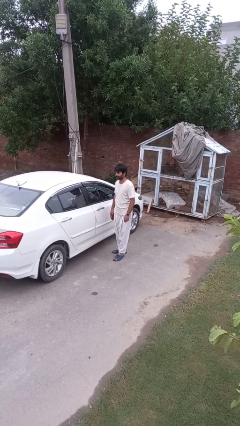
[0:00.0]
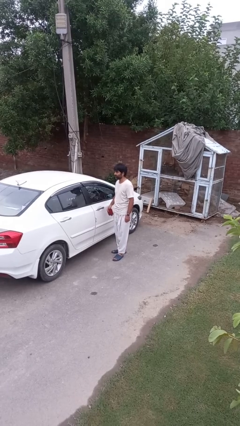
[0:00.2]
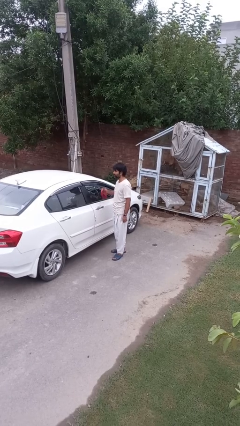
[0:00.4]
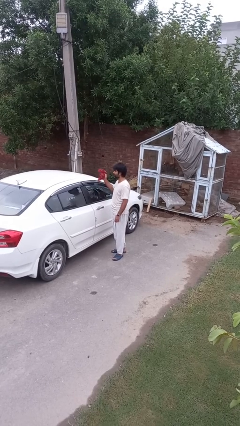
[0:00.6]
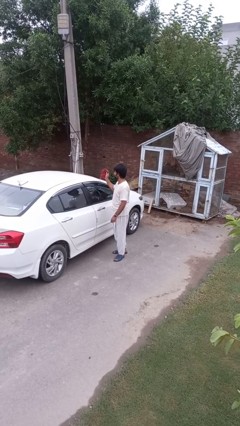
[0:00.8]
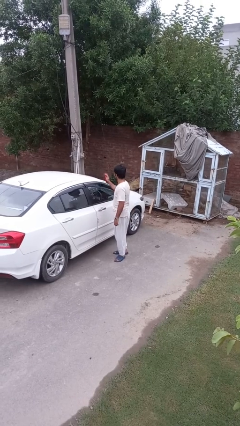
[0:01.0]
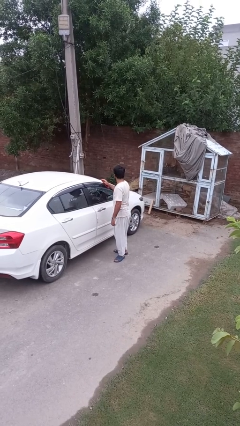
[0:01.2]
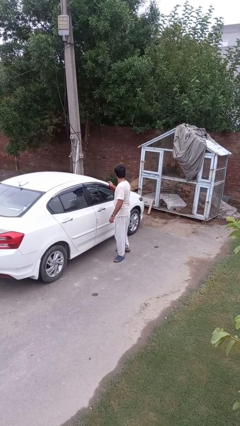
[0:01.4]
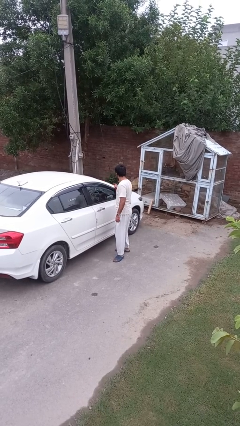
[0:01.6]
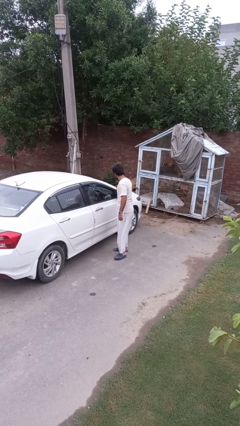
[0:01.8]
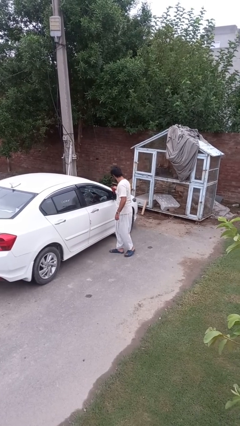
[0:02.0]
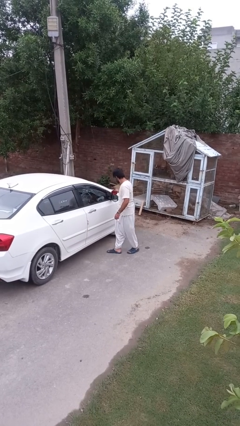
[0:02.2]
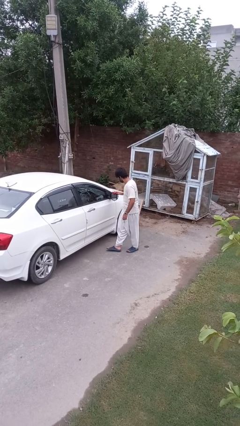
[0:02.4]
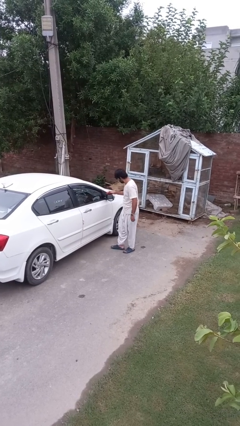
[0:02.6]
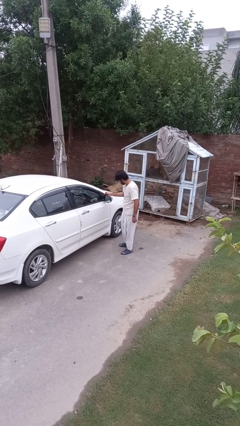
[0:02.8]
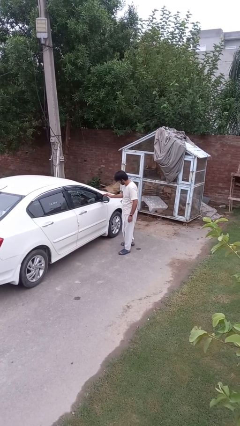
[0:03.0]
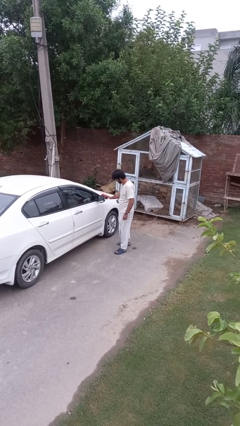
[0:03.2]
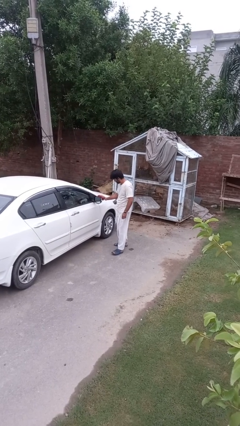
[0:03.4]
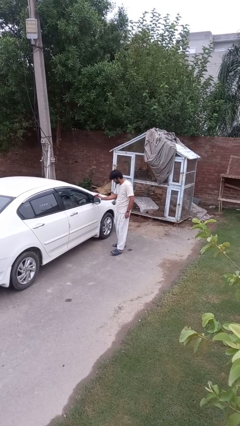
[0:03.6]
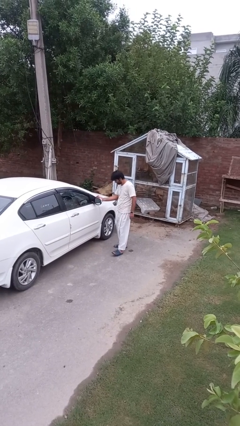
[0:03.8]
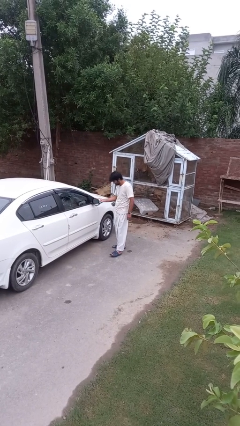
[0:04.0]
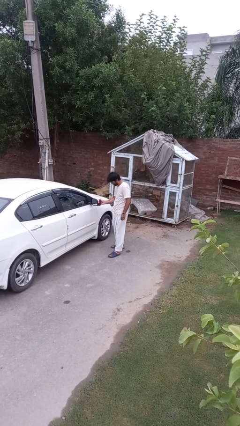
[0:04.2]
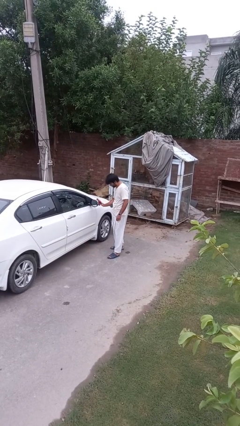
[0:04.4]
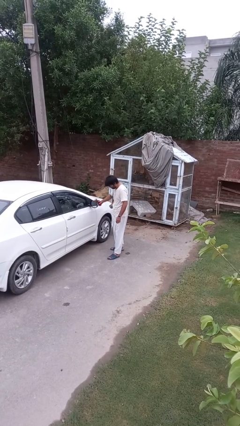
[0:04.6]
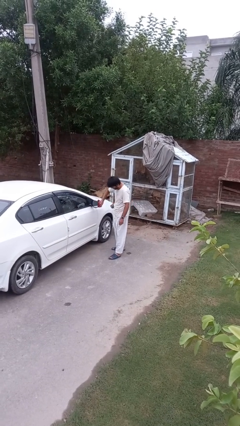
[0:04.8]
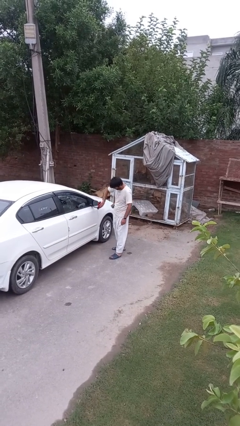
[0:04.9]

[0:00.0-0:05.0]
person polishes car with rag

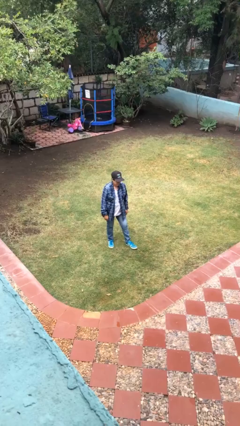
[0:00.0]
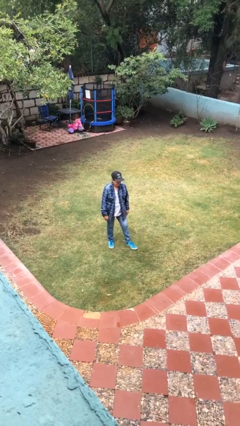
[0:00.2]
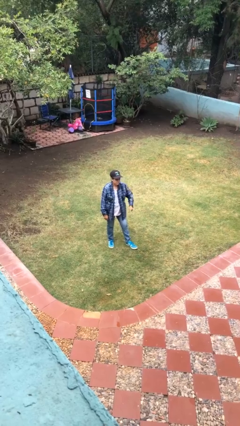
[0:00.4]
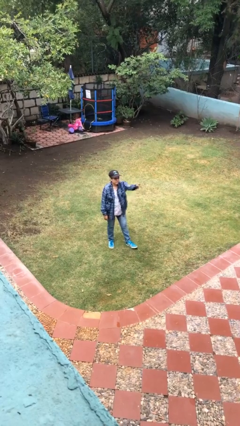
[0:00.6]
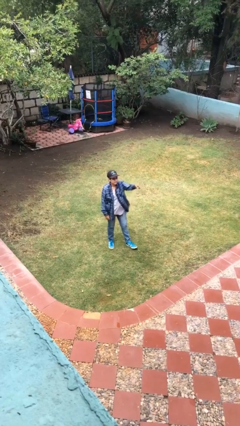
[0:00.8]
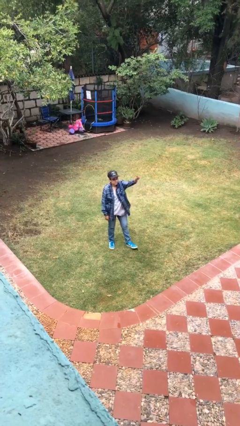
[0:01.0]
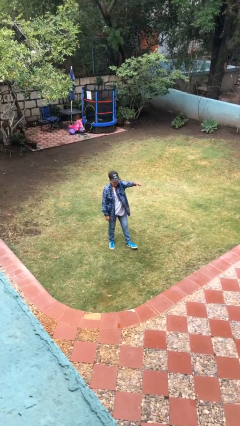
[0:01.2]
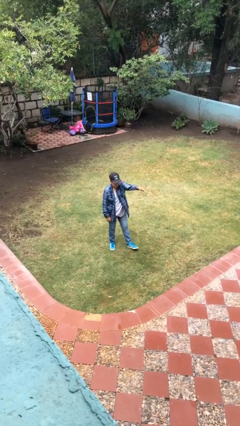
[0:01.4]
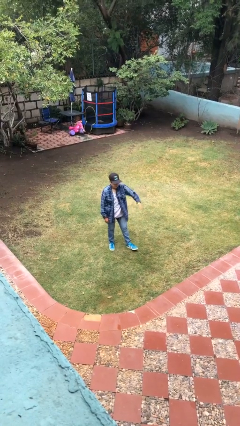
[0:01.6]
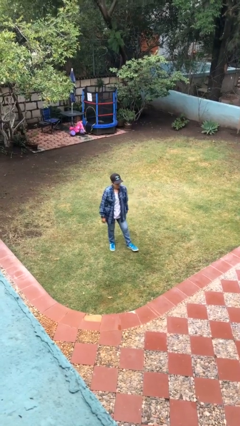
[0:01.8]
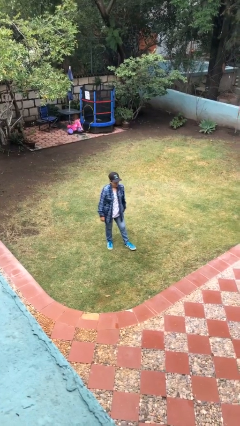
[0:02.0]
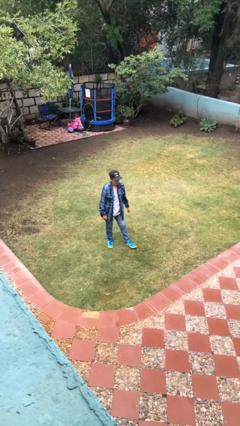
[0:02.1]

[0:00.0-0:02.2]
person points at person

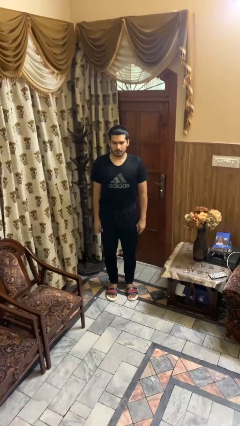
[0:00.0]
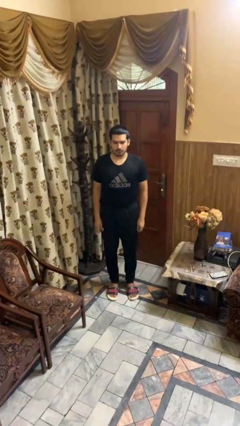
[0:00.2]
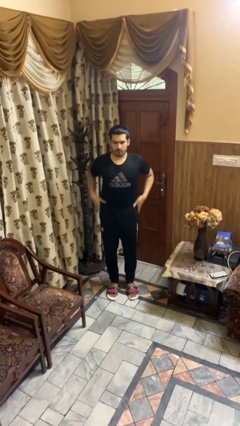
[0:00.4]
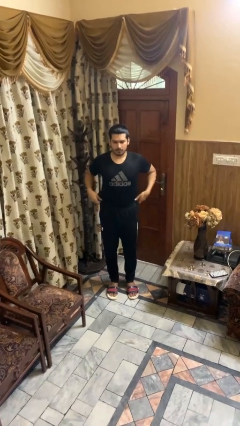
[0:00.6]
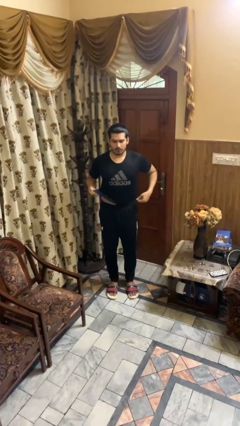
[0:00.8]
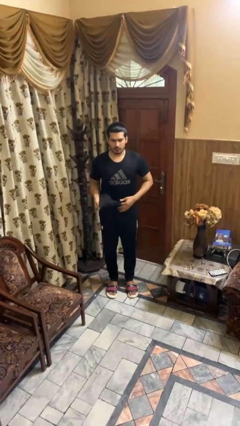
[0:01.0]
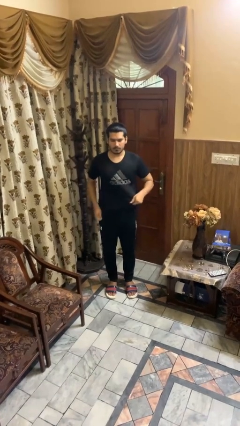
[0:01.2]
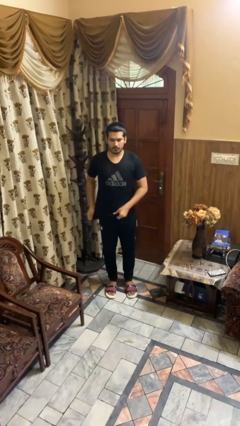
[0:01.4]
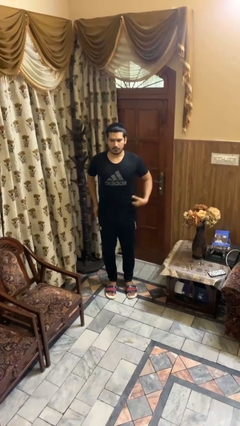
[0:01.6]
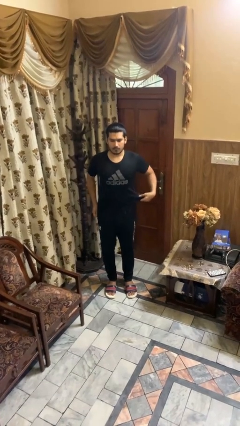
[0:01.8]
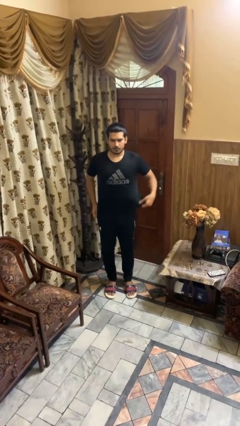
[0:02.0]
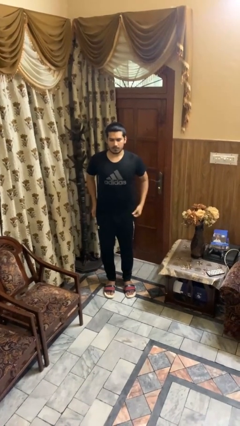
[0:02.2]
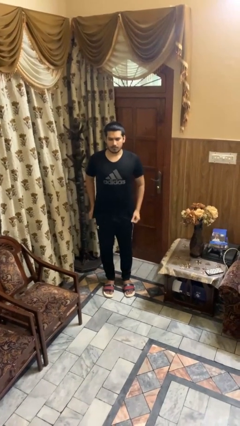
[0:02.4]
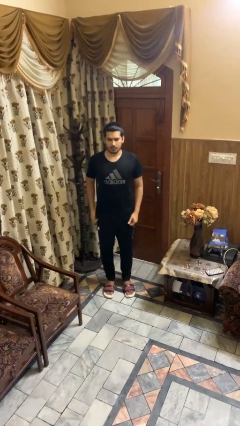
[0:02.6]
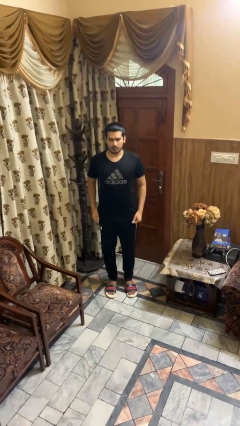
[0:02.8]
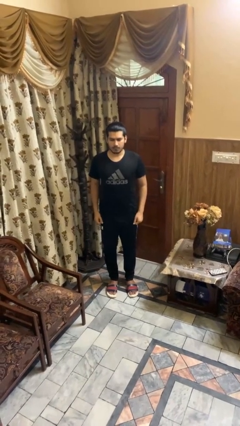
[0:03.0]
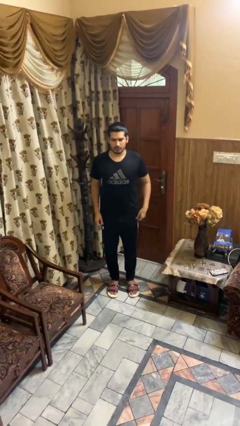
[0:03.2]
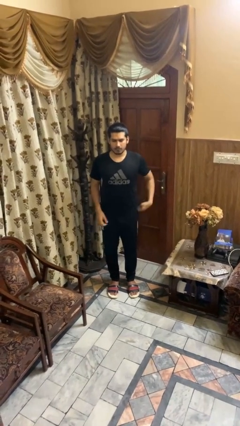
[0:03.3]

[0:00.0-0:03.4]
person untucks shirt

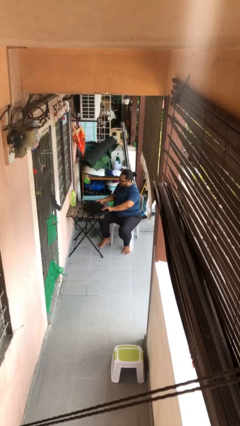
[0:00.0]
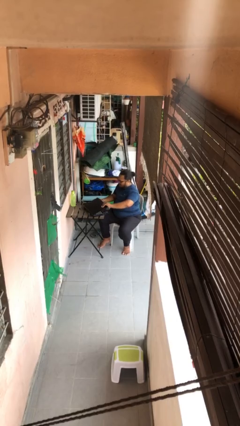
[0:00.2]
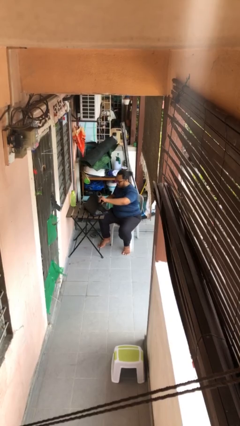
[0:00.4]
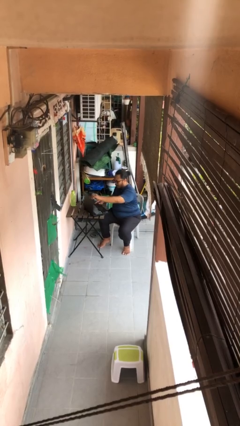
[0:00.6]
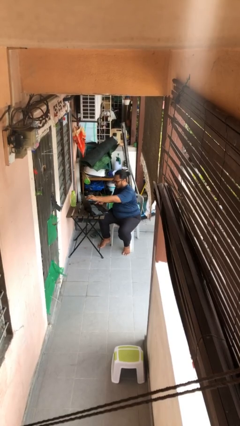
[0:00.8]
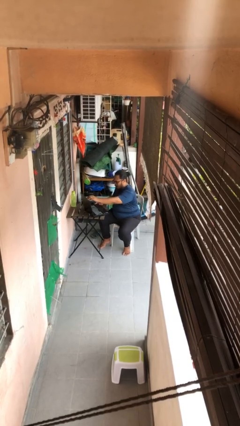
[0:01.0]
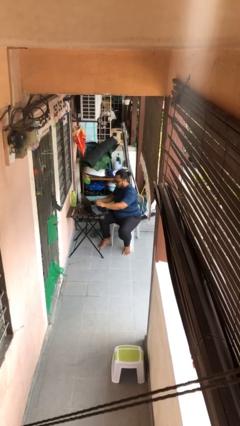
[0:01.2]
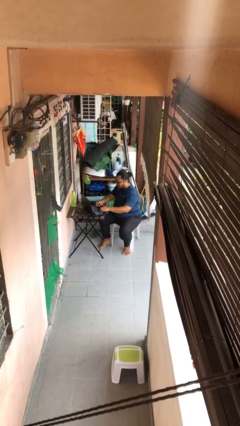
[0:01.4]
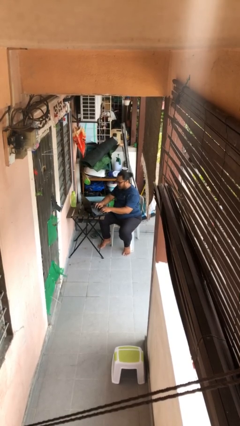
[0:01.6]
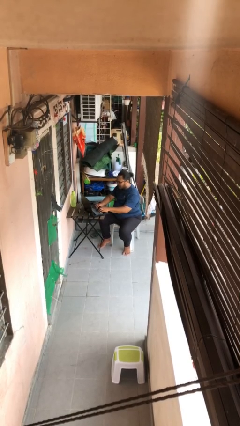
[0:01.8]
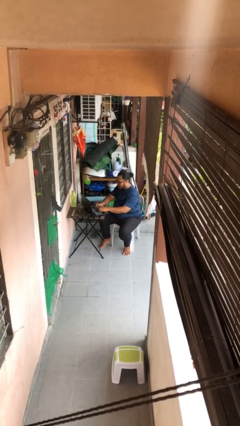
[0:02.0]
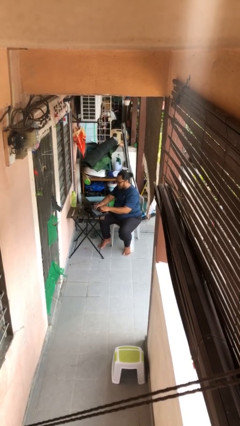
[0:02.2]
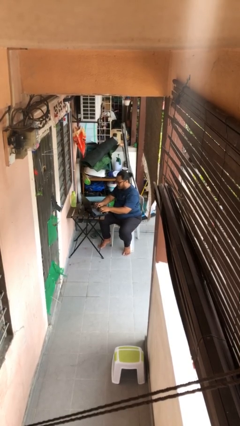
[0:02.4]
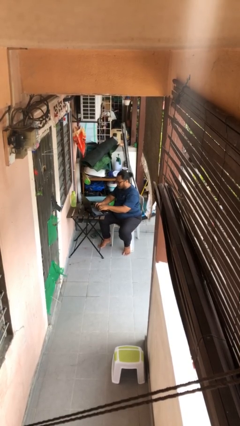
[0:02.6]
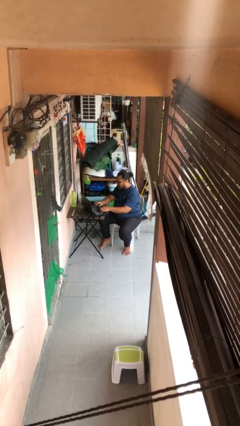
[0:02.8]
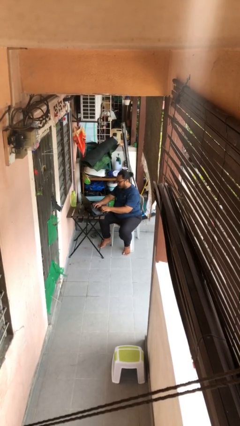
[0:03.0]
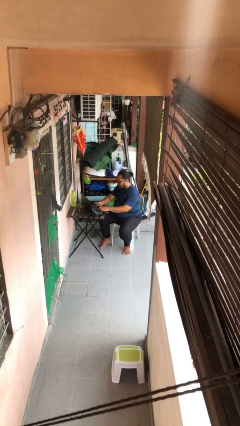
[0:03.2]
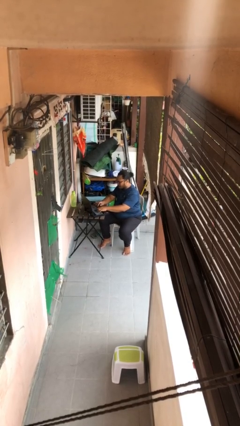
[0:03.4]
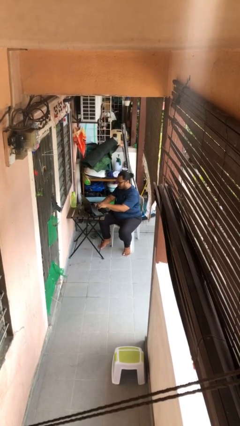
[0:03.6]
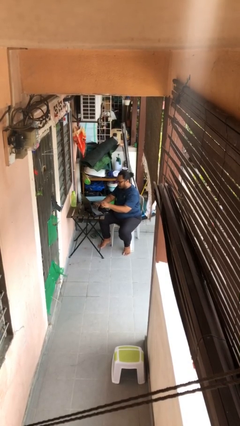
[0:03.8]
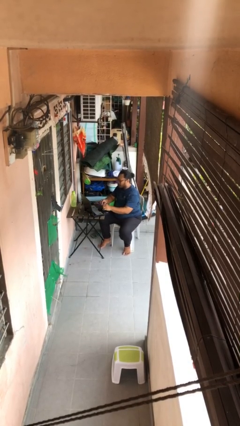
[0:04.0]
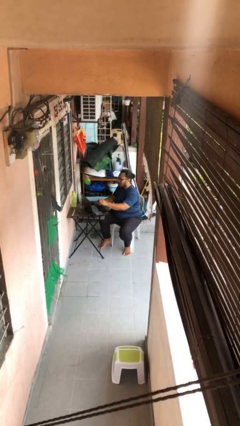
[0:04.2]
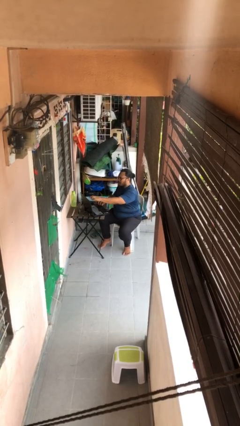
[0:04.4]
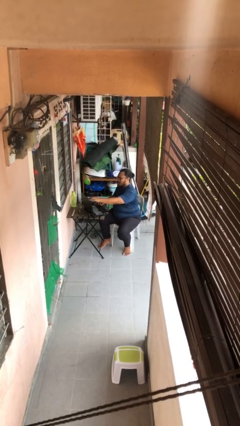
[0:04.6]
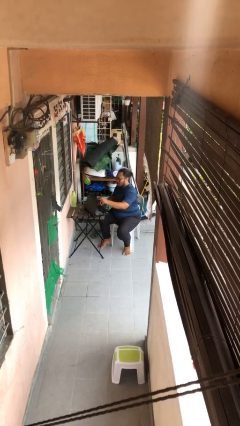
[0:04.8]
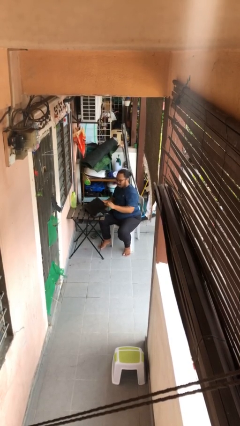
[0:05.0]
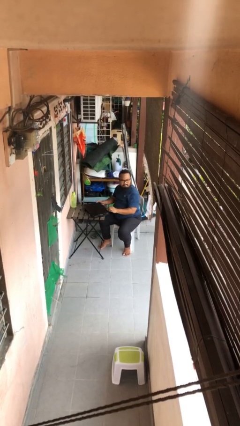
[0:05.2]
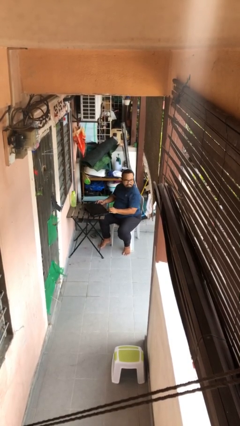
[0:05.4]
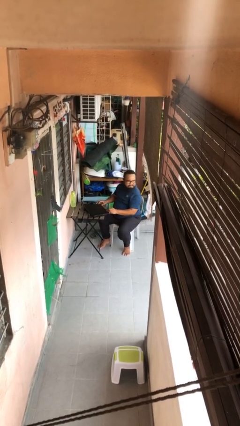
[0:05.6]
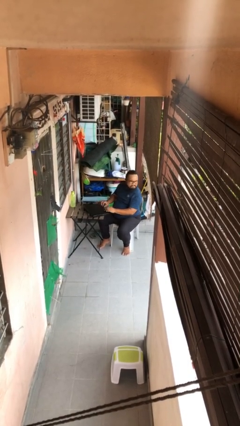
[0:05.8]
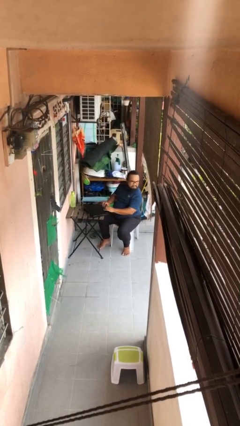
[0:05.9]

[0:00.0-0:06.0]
person interacts with laptop

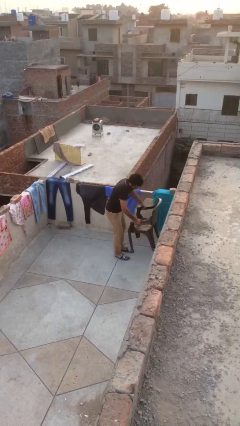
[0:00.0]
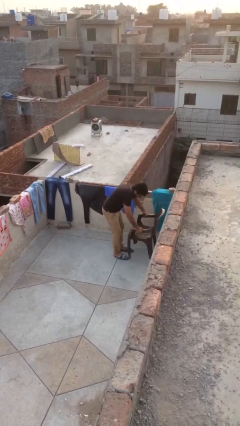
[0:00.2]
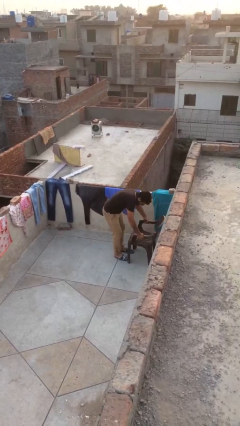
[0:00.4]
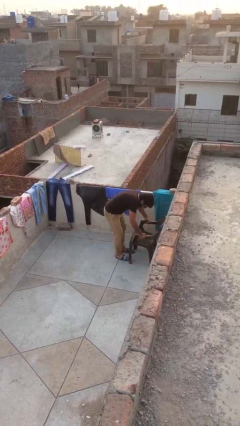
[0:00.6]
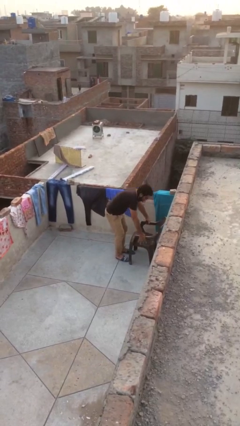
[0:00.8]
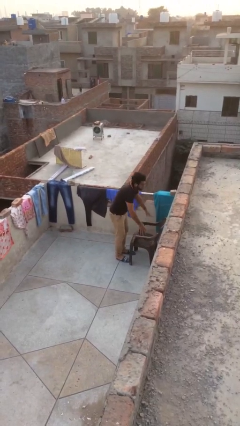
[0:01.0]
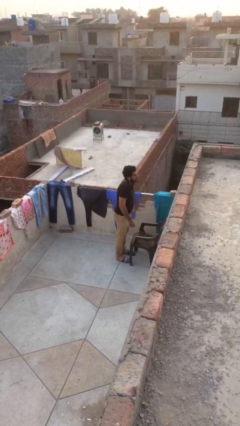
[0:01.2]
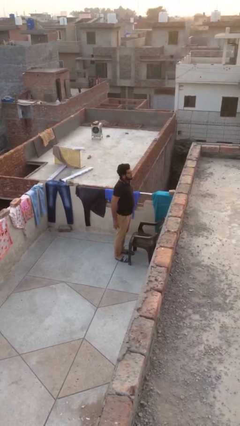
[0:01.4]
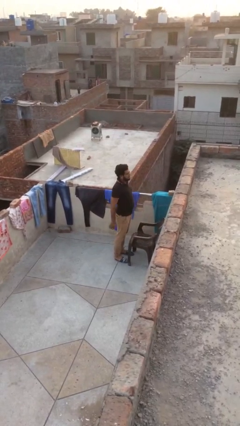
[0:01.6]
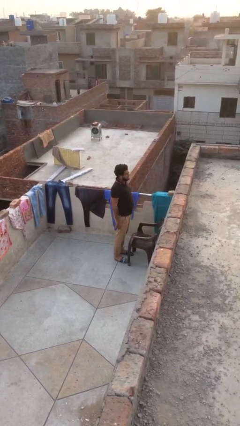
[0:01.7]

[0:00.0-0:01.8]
person puts down object on floor
